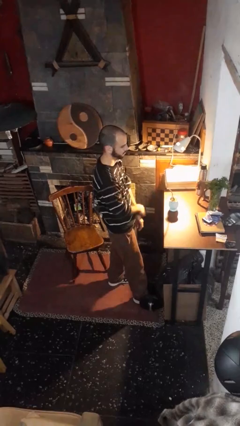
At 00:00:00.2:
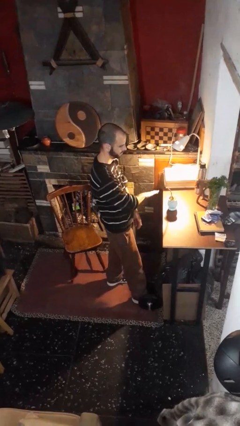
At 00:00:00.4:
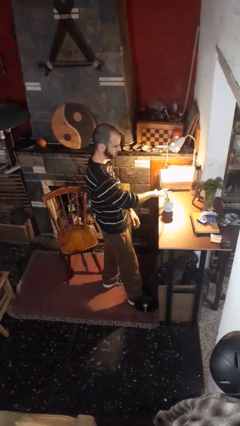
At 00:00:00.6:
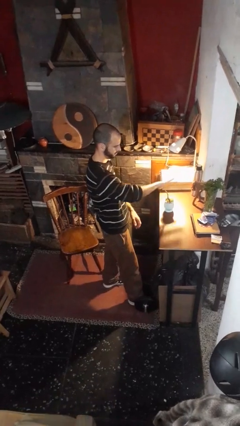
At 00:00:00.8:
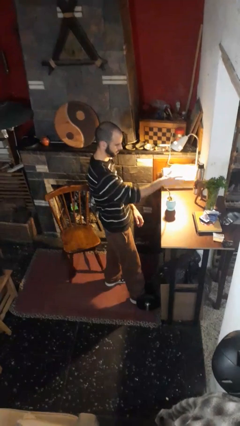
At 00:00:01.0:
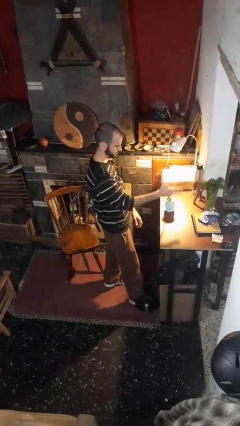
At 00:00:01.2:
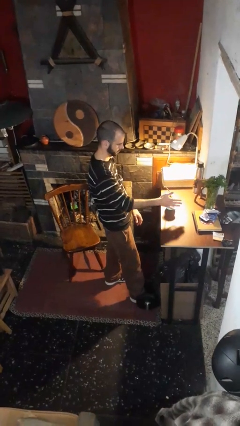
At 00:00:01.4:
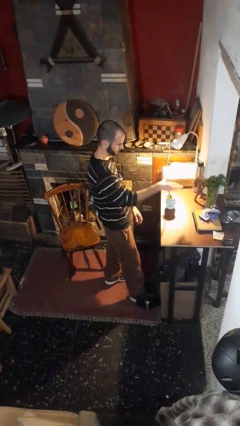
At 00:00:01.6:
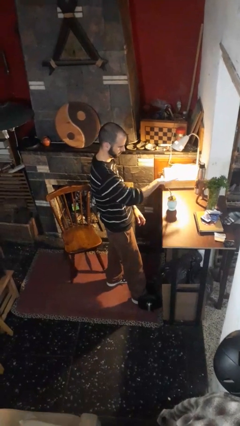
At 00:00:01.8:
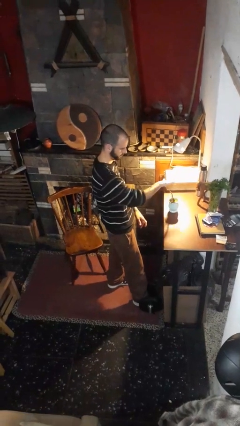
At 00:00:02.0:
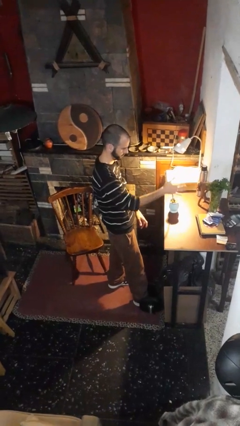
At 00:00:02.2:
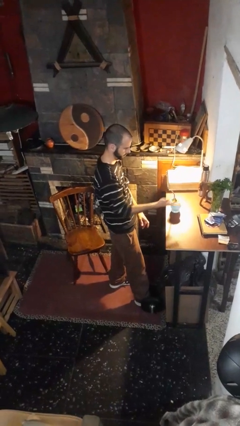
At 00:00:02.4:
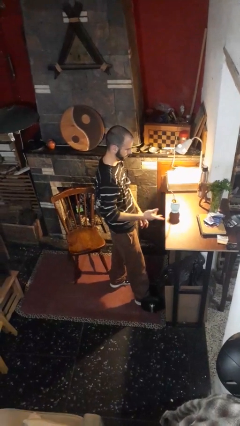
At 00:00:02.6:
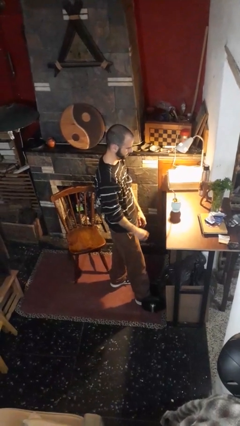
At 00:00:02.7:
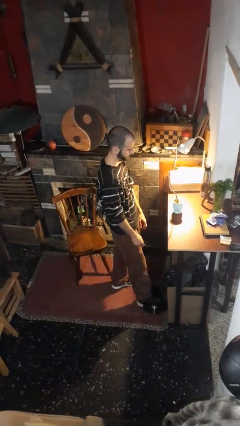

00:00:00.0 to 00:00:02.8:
person waves hand over object

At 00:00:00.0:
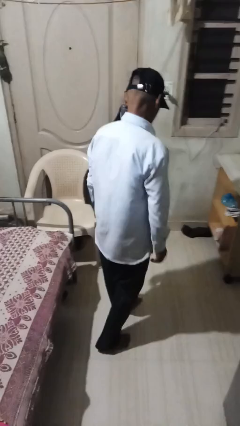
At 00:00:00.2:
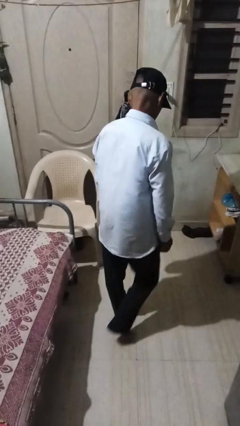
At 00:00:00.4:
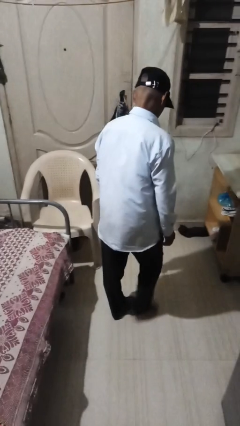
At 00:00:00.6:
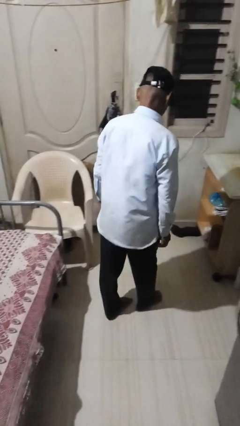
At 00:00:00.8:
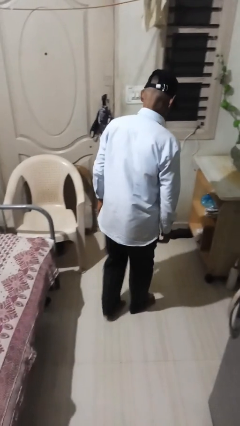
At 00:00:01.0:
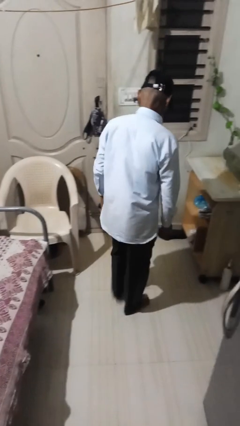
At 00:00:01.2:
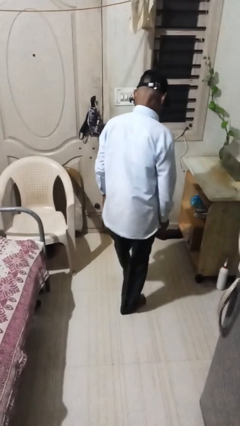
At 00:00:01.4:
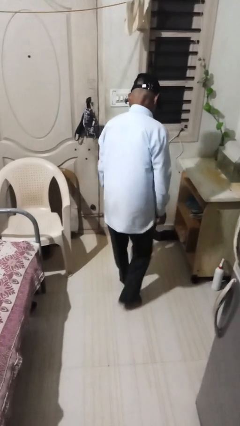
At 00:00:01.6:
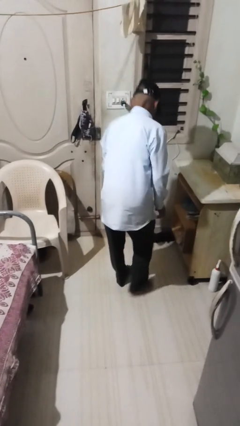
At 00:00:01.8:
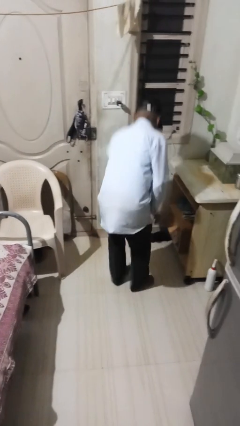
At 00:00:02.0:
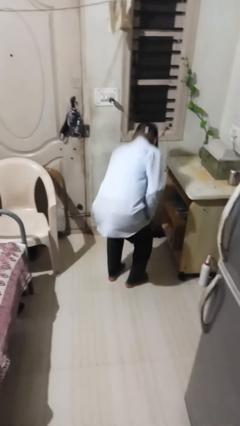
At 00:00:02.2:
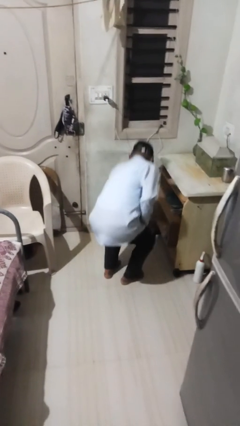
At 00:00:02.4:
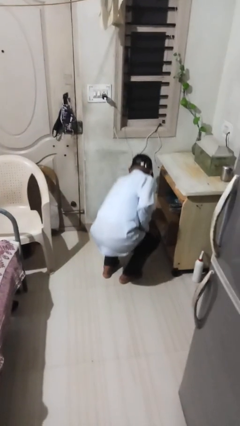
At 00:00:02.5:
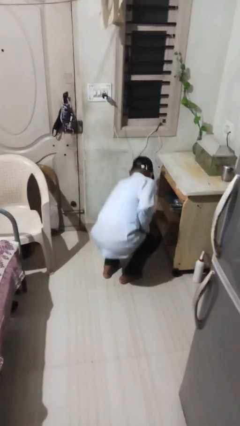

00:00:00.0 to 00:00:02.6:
person picks up object from floor

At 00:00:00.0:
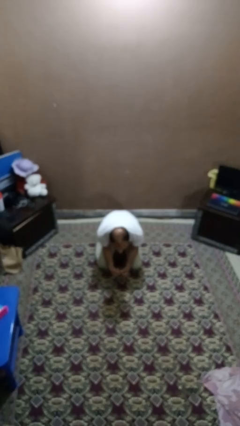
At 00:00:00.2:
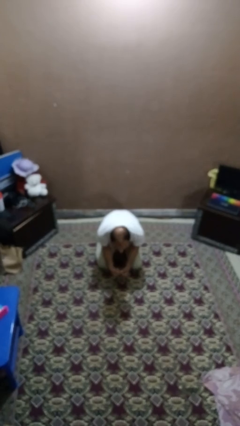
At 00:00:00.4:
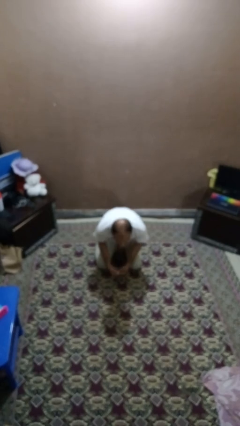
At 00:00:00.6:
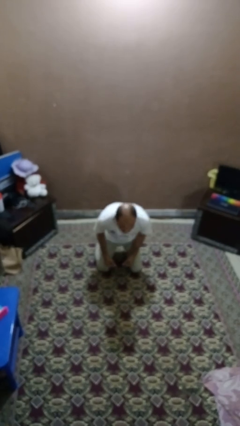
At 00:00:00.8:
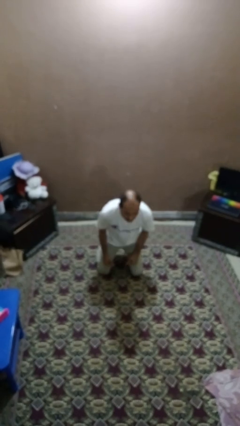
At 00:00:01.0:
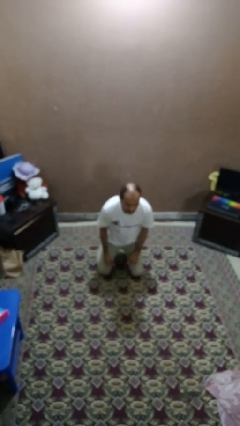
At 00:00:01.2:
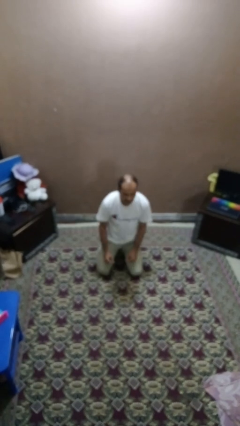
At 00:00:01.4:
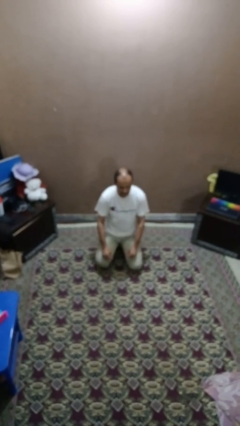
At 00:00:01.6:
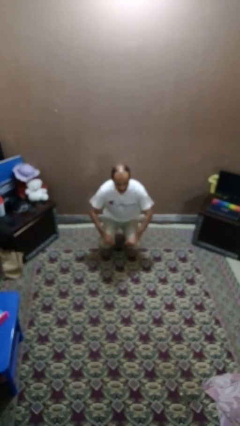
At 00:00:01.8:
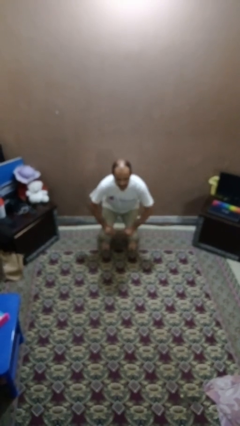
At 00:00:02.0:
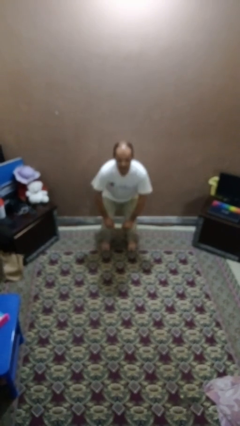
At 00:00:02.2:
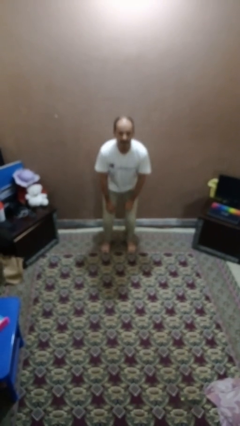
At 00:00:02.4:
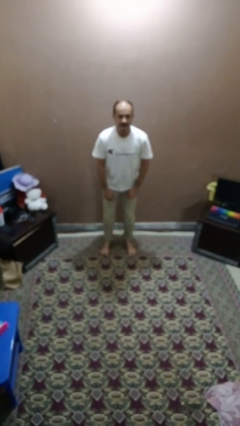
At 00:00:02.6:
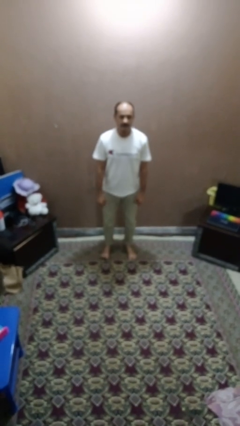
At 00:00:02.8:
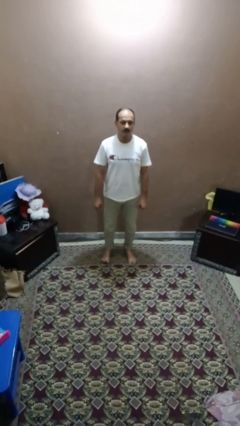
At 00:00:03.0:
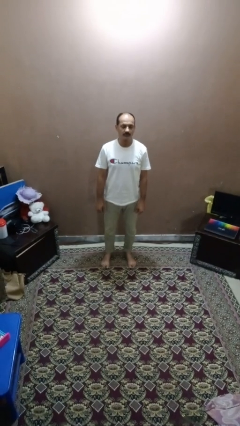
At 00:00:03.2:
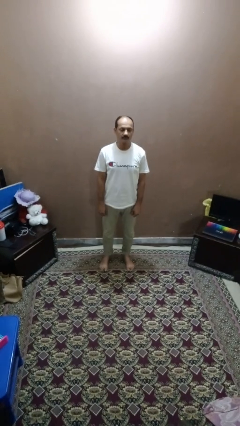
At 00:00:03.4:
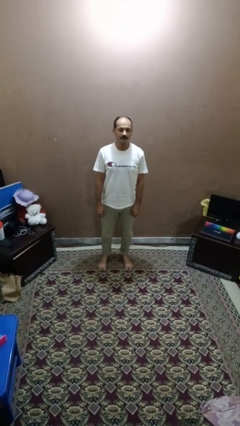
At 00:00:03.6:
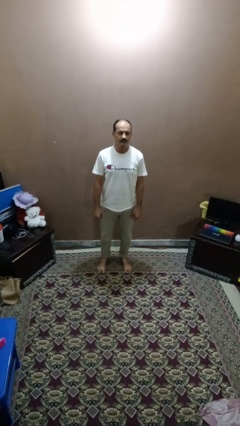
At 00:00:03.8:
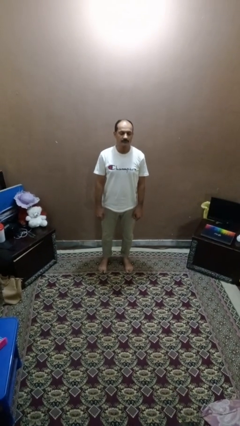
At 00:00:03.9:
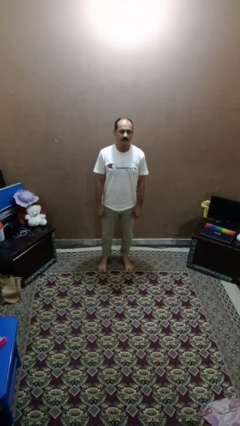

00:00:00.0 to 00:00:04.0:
person stands up from floor

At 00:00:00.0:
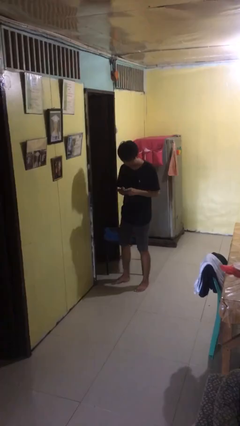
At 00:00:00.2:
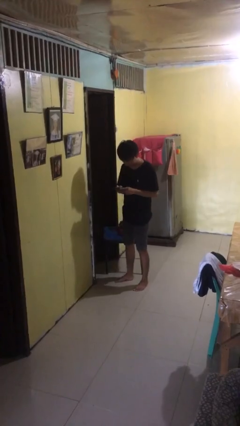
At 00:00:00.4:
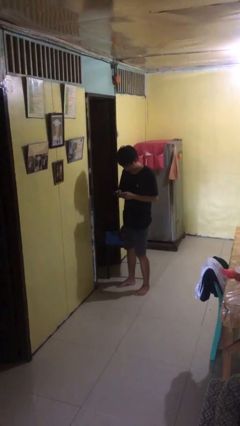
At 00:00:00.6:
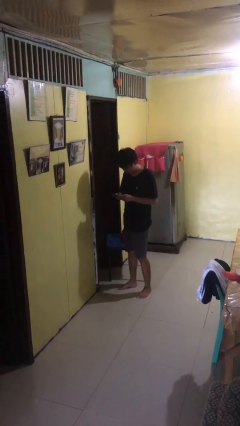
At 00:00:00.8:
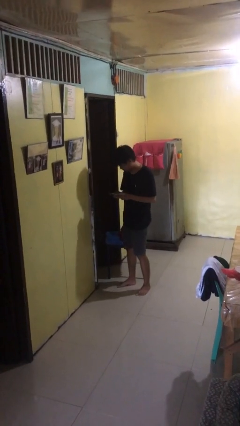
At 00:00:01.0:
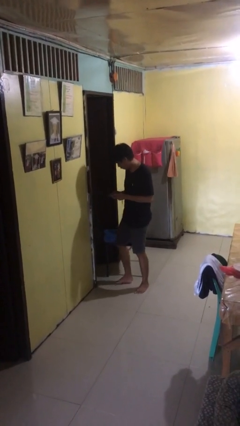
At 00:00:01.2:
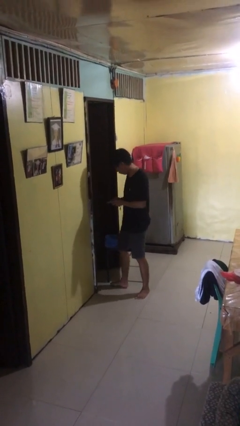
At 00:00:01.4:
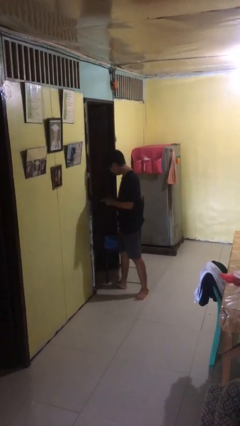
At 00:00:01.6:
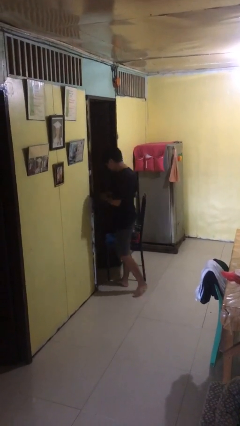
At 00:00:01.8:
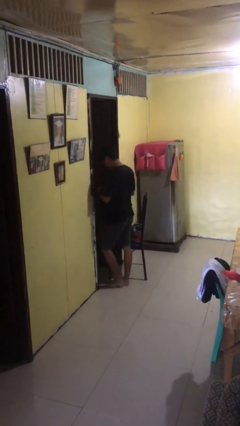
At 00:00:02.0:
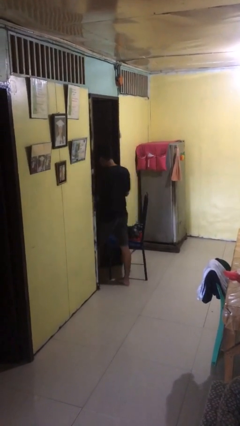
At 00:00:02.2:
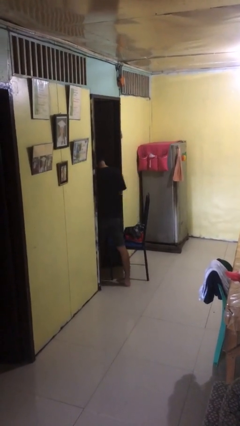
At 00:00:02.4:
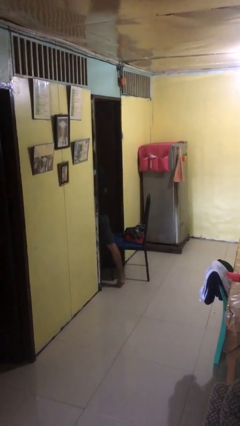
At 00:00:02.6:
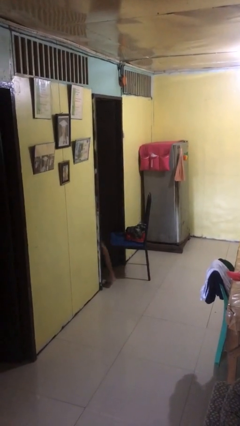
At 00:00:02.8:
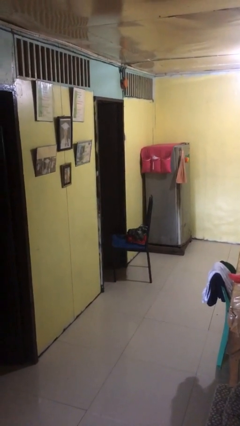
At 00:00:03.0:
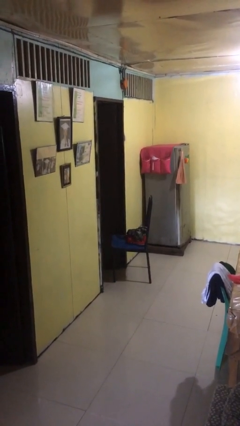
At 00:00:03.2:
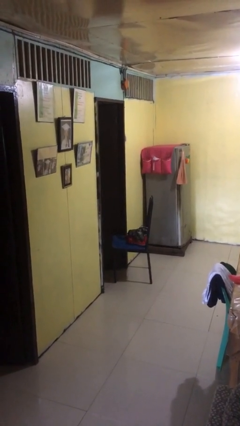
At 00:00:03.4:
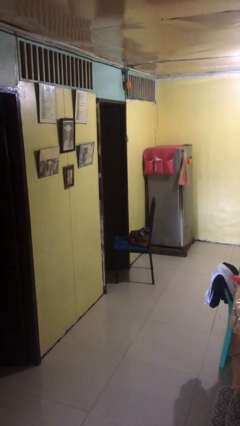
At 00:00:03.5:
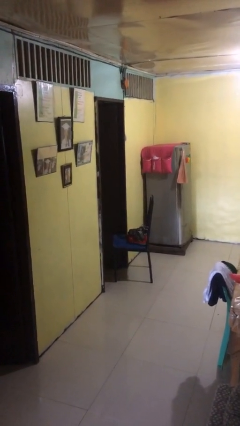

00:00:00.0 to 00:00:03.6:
person exits scene through structure

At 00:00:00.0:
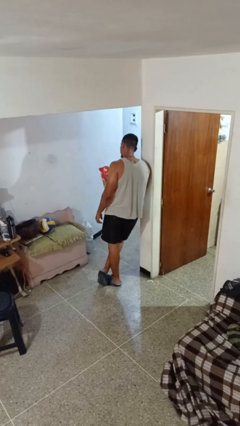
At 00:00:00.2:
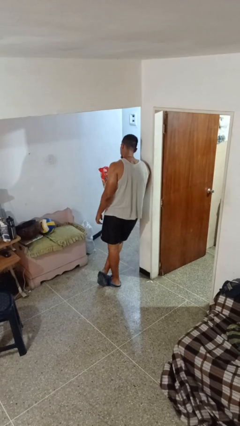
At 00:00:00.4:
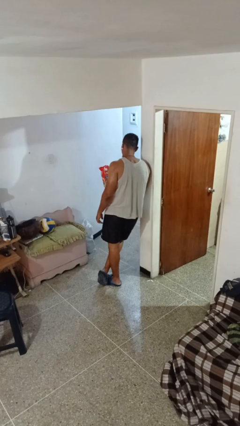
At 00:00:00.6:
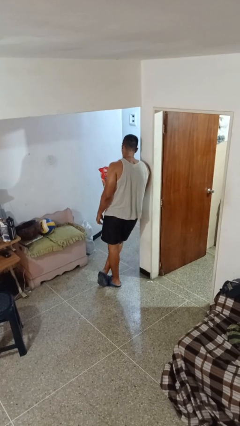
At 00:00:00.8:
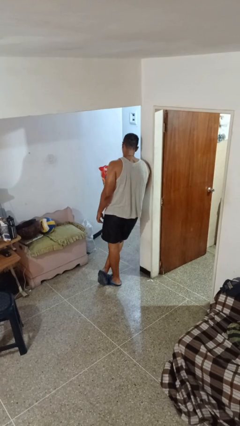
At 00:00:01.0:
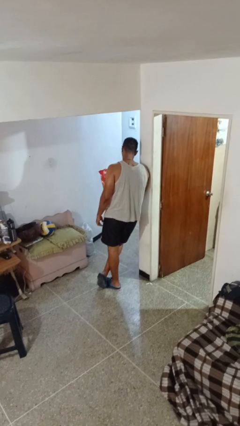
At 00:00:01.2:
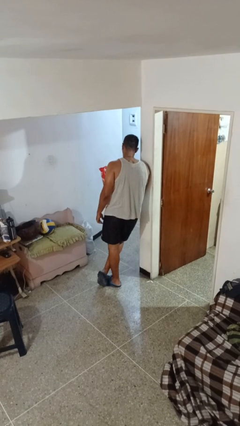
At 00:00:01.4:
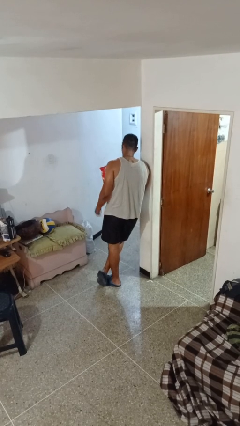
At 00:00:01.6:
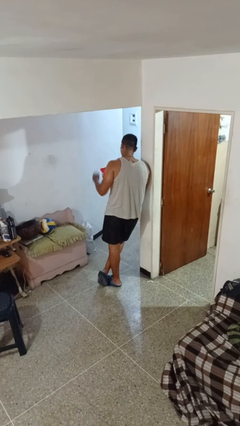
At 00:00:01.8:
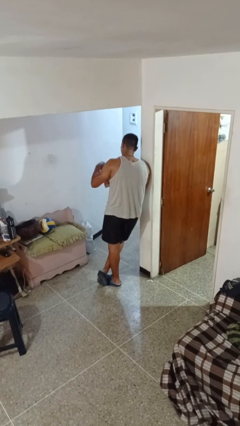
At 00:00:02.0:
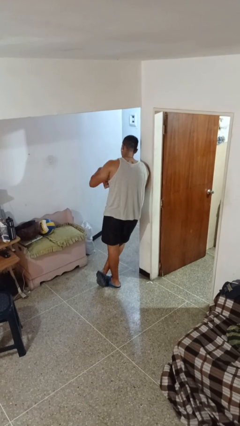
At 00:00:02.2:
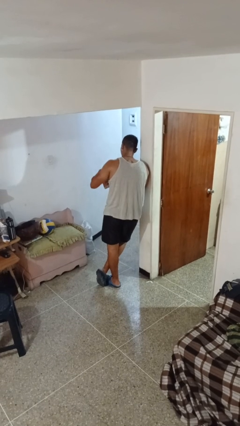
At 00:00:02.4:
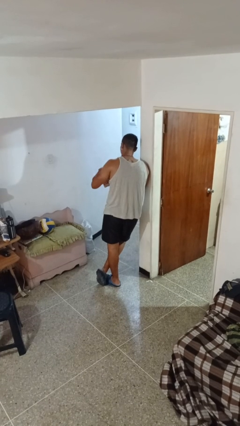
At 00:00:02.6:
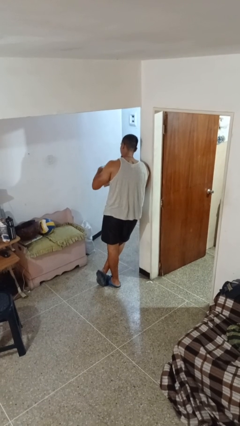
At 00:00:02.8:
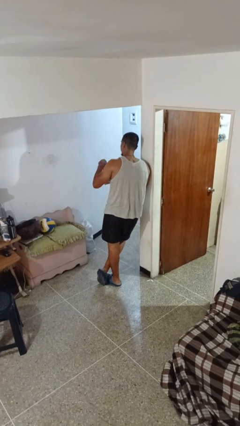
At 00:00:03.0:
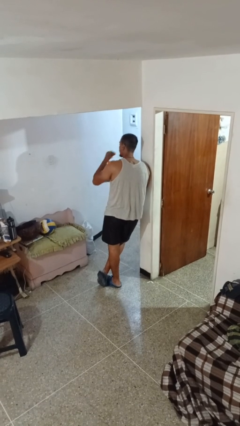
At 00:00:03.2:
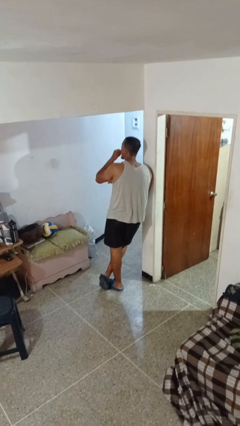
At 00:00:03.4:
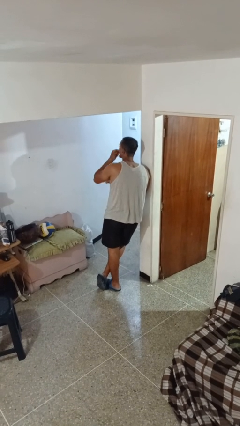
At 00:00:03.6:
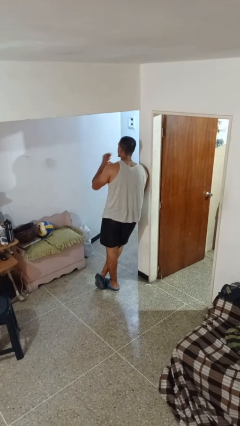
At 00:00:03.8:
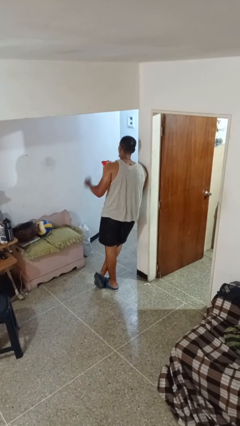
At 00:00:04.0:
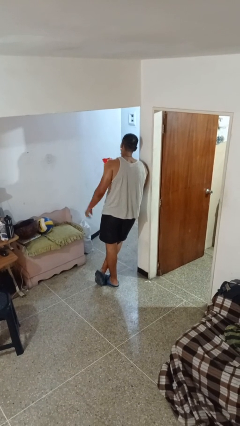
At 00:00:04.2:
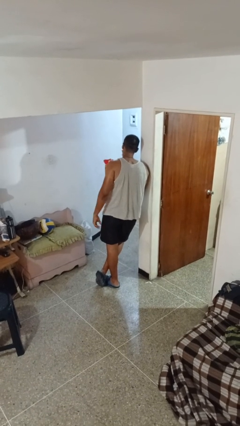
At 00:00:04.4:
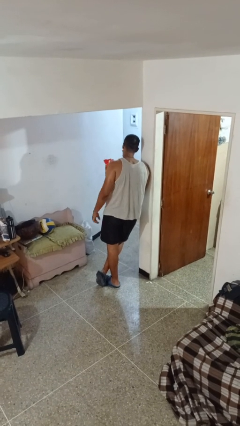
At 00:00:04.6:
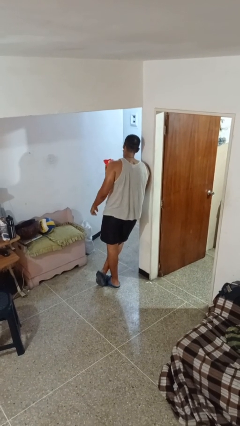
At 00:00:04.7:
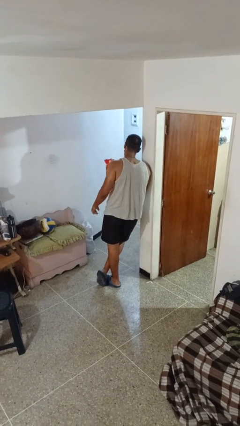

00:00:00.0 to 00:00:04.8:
person eats snack from bag
